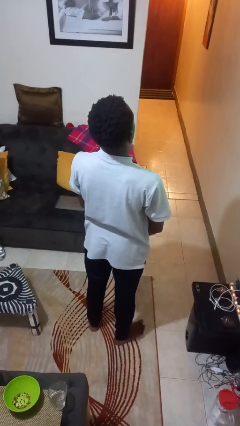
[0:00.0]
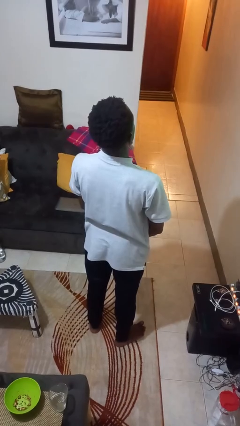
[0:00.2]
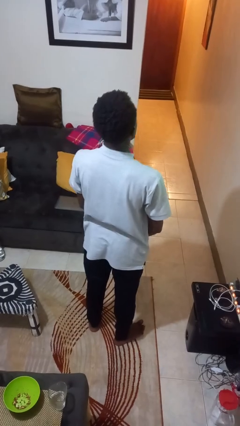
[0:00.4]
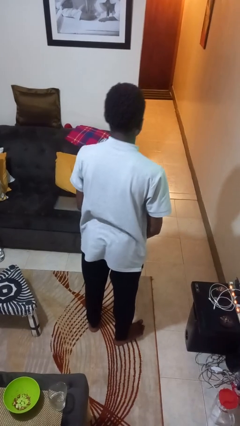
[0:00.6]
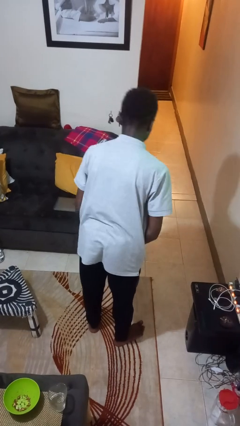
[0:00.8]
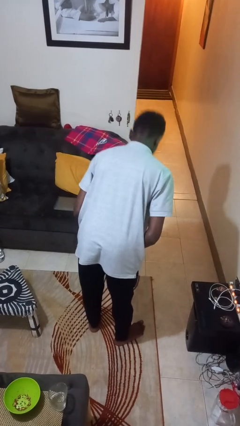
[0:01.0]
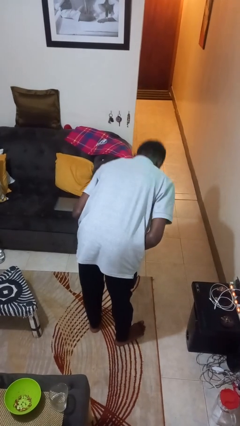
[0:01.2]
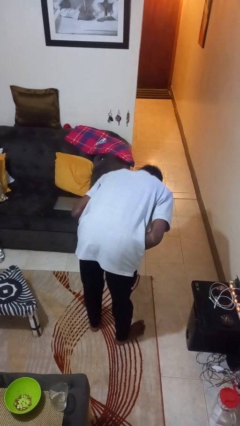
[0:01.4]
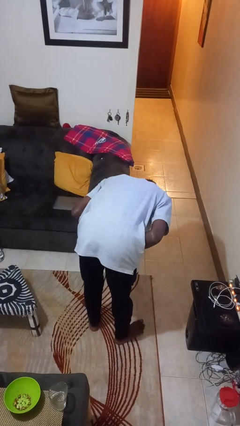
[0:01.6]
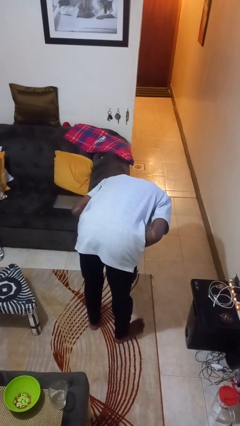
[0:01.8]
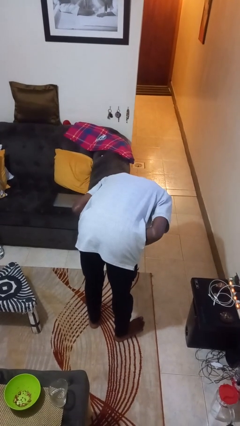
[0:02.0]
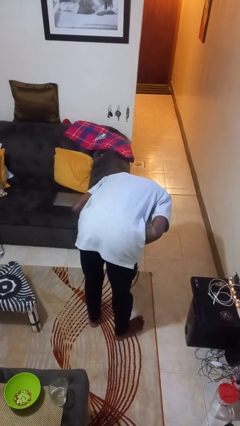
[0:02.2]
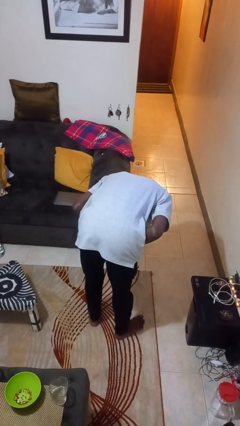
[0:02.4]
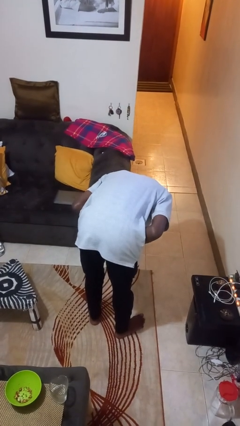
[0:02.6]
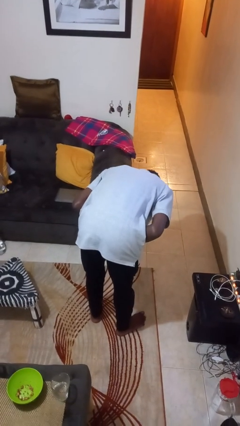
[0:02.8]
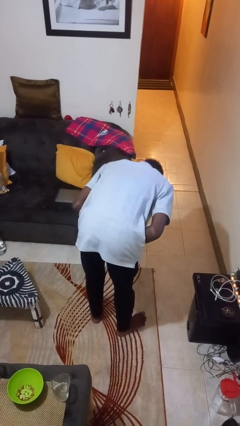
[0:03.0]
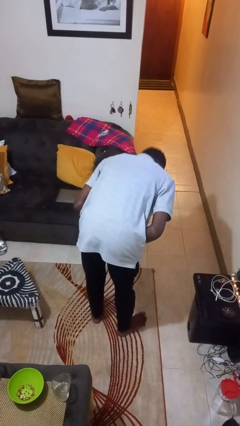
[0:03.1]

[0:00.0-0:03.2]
person bows

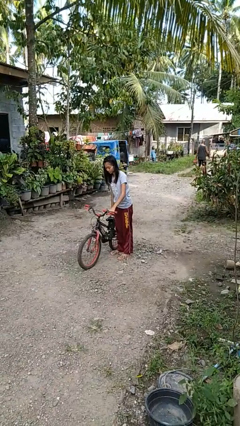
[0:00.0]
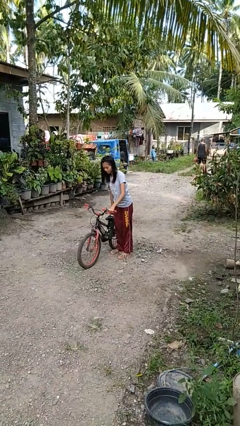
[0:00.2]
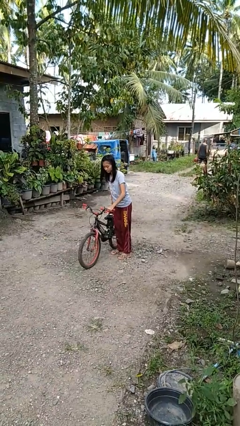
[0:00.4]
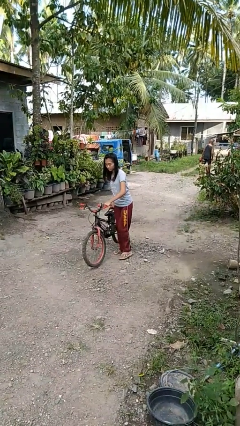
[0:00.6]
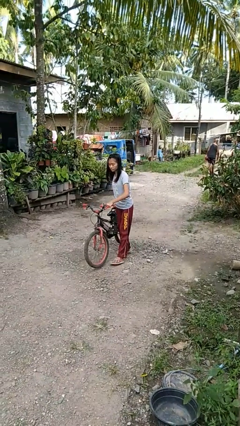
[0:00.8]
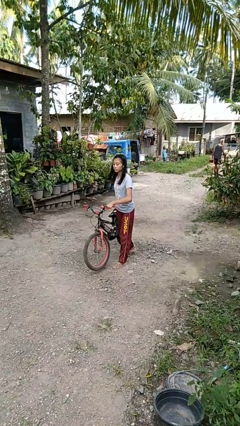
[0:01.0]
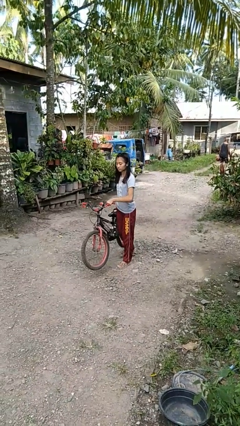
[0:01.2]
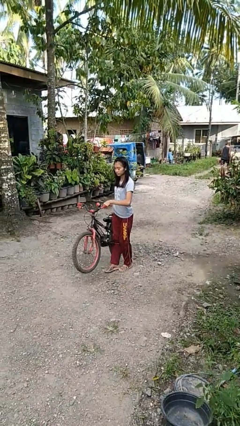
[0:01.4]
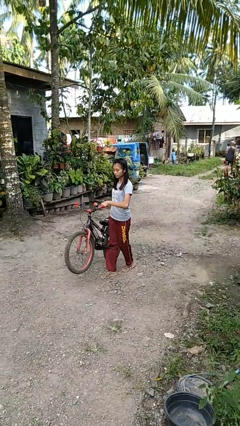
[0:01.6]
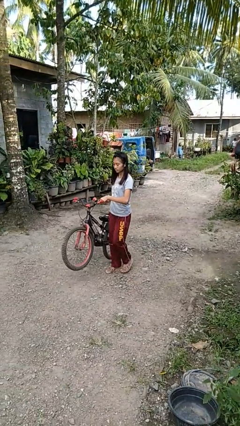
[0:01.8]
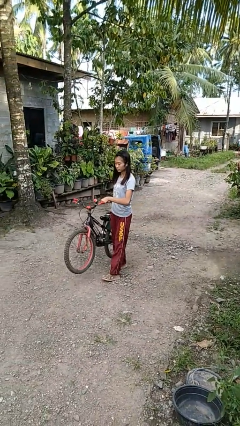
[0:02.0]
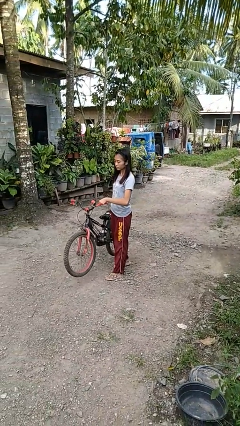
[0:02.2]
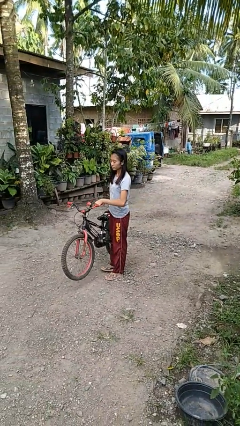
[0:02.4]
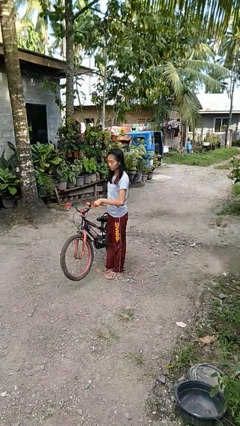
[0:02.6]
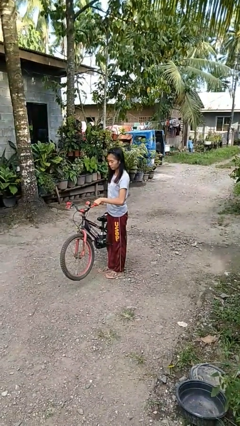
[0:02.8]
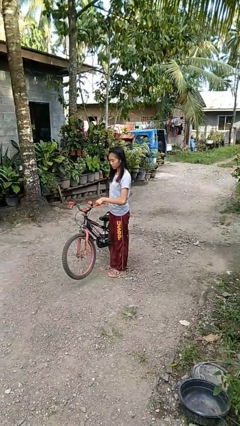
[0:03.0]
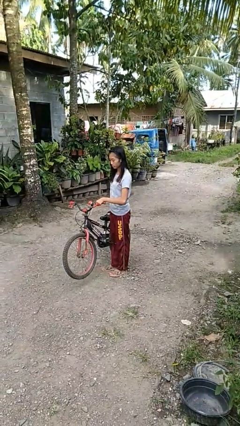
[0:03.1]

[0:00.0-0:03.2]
person carries bicycle

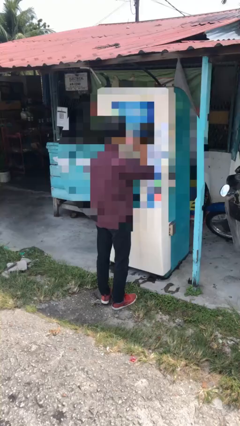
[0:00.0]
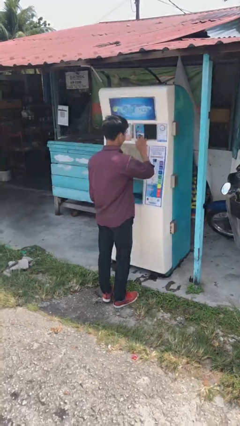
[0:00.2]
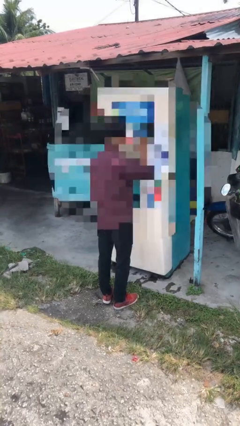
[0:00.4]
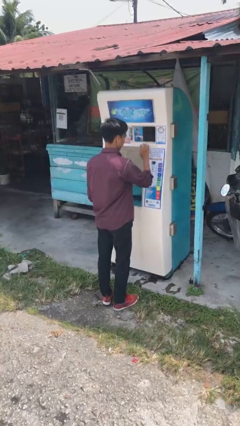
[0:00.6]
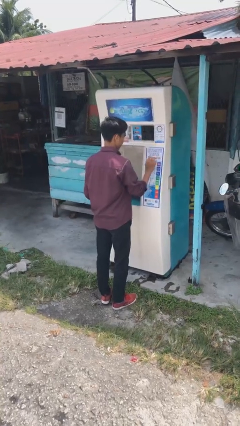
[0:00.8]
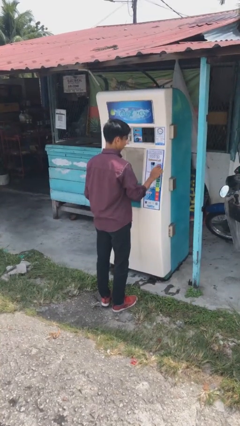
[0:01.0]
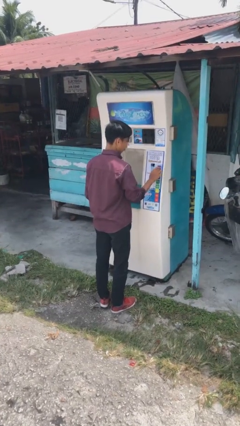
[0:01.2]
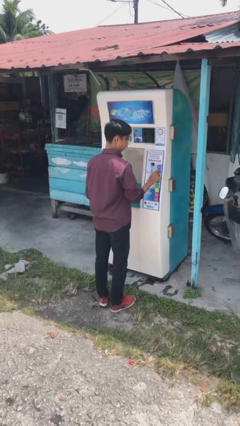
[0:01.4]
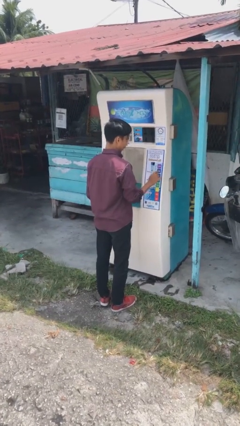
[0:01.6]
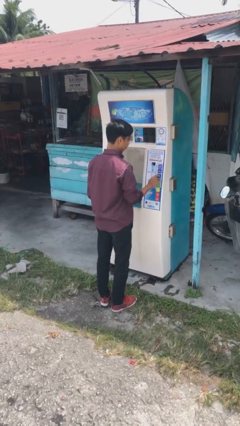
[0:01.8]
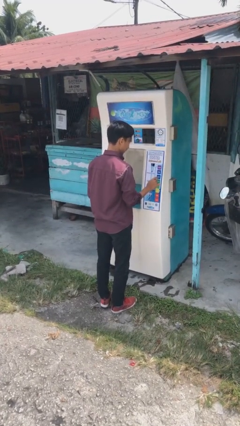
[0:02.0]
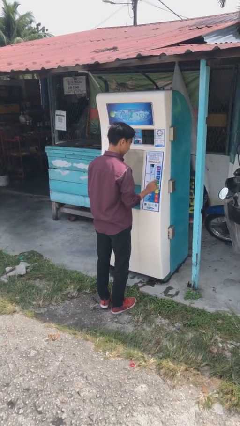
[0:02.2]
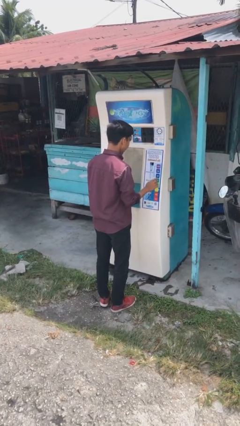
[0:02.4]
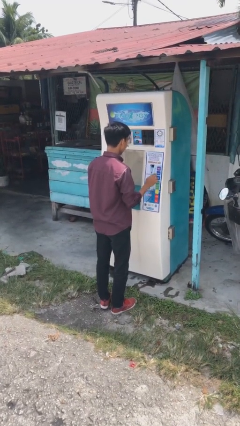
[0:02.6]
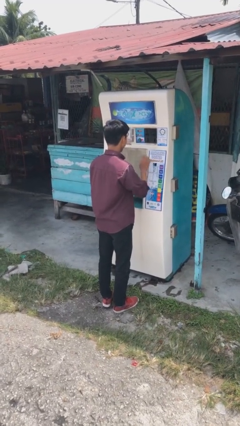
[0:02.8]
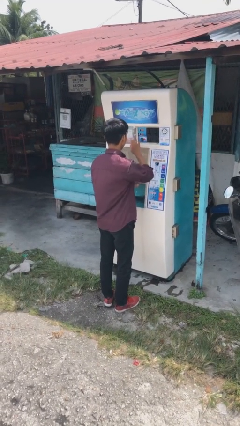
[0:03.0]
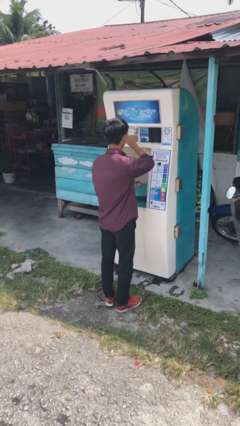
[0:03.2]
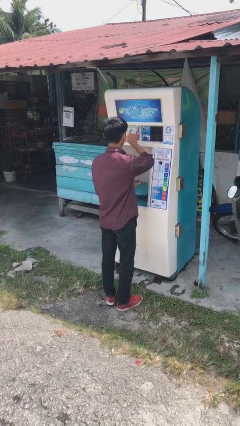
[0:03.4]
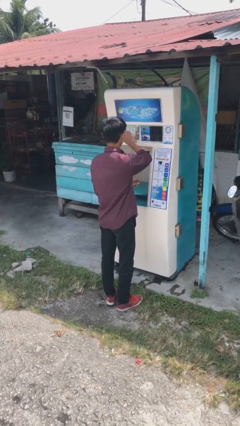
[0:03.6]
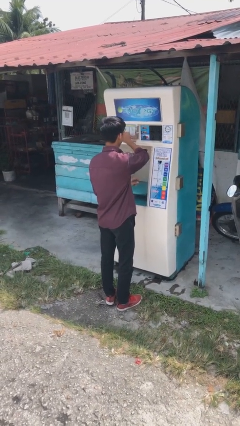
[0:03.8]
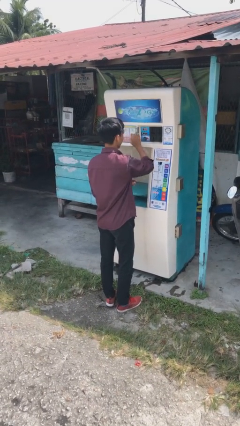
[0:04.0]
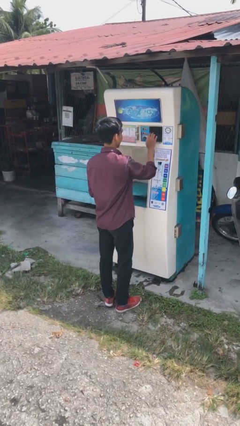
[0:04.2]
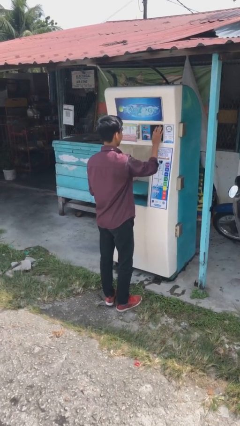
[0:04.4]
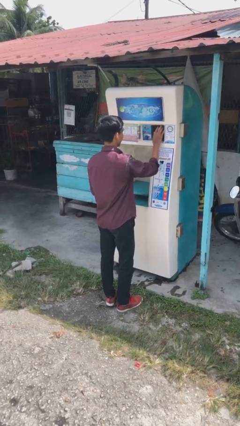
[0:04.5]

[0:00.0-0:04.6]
person purchases from machine

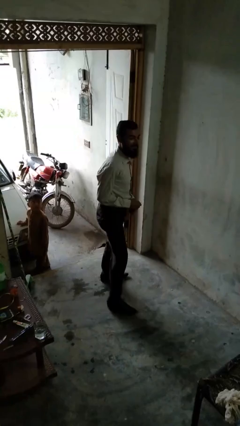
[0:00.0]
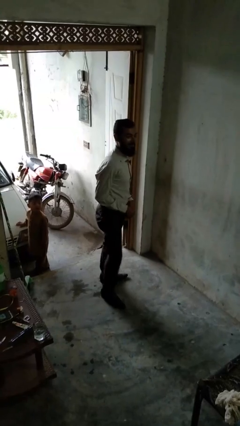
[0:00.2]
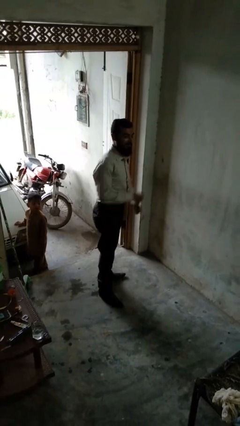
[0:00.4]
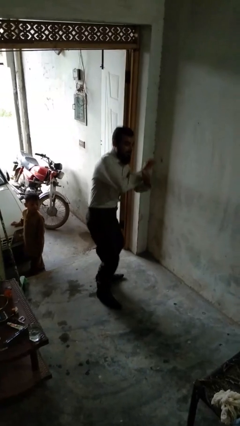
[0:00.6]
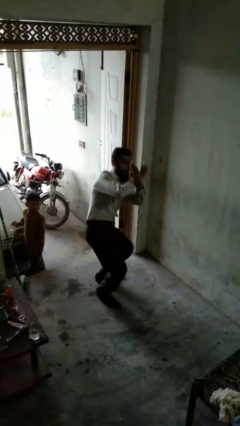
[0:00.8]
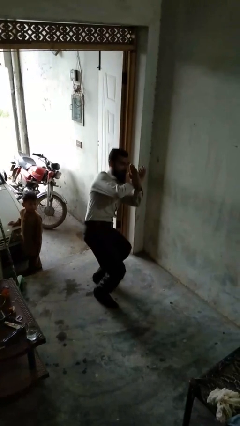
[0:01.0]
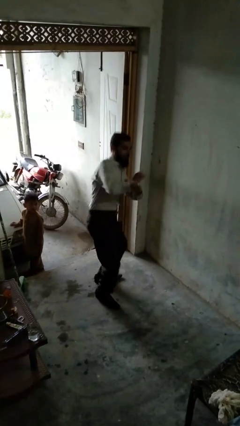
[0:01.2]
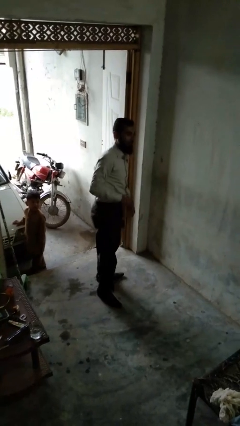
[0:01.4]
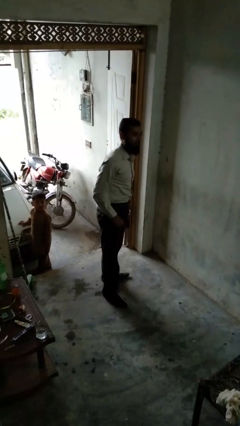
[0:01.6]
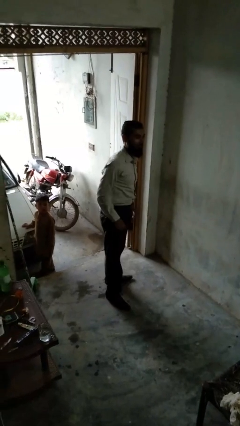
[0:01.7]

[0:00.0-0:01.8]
person karate chop

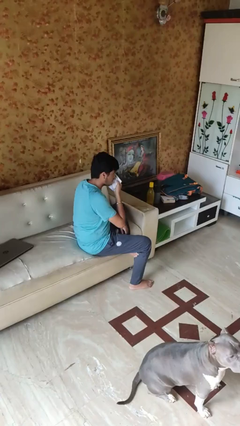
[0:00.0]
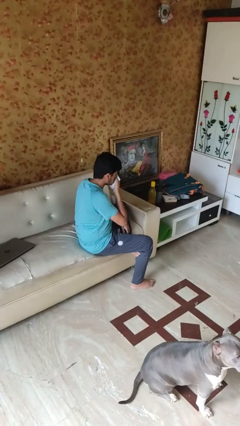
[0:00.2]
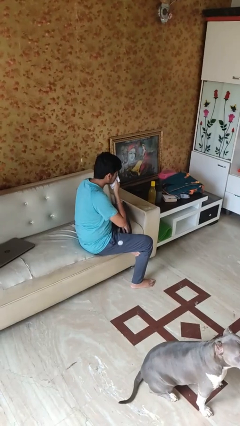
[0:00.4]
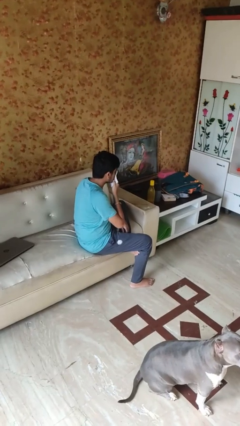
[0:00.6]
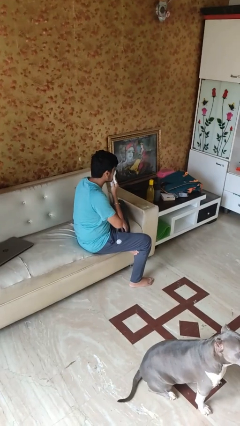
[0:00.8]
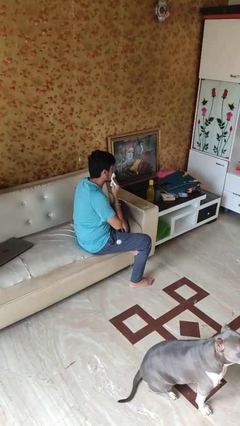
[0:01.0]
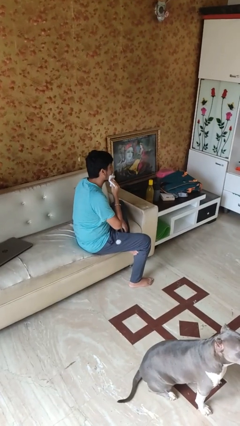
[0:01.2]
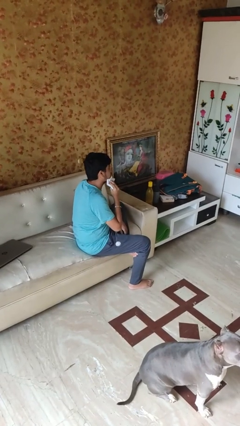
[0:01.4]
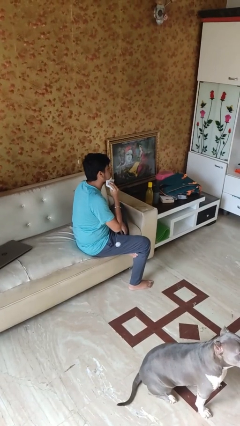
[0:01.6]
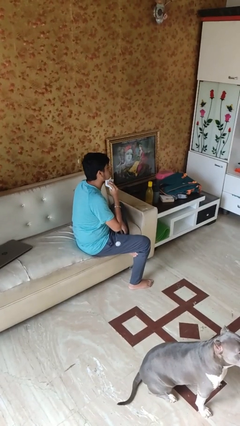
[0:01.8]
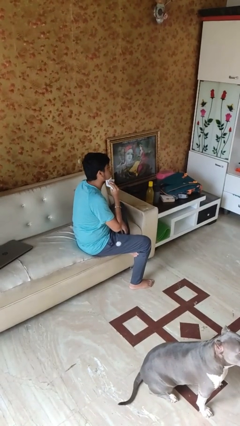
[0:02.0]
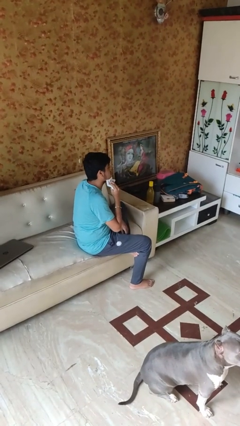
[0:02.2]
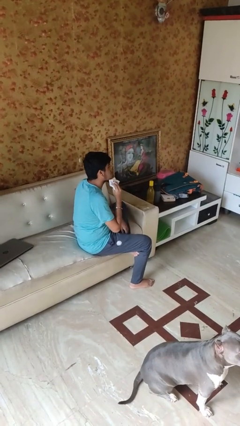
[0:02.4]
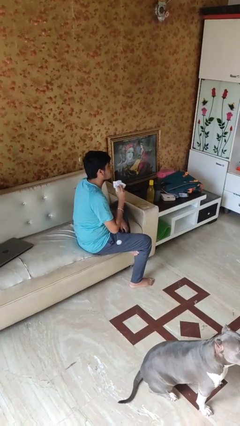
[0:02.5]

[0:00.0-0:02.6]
person wipes mouth with napkin

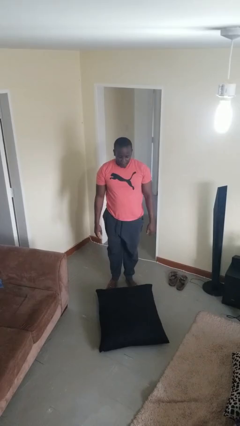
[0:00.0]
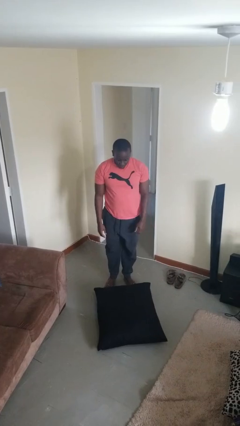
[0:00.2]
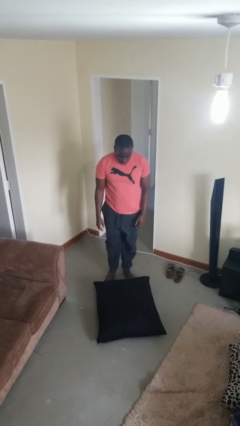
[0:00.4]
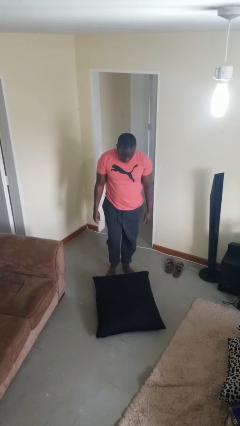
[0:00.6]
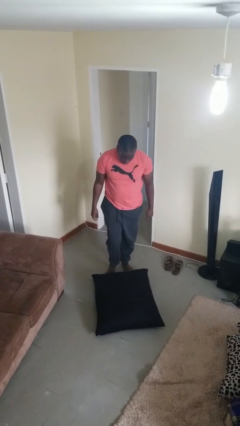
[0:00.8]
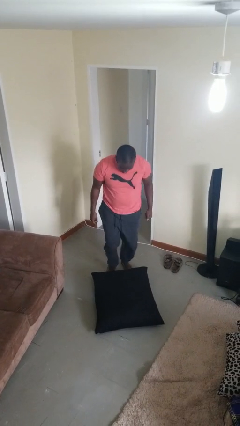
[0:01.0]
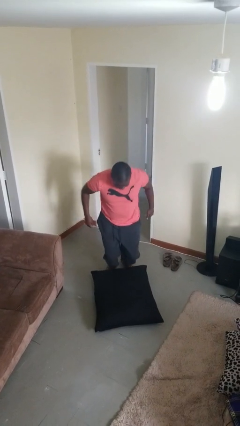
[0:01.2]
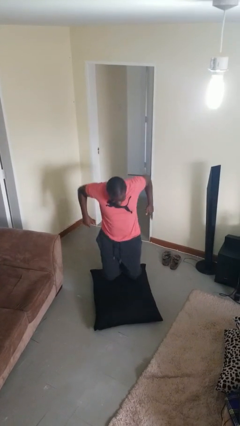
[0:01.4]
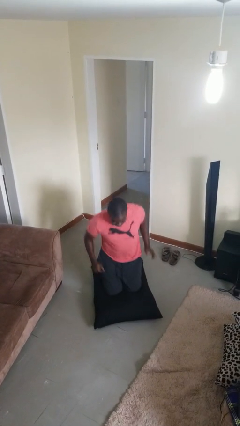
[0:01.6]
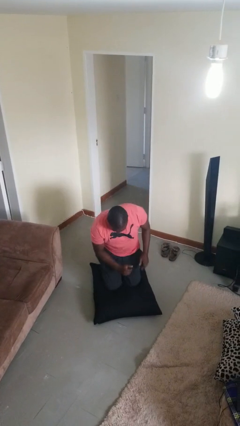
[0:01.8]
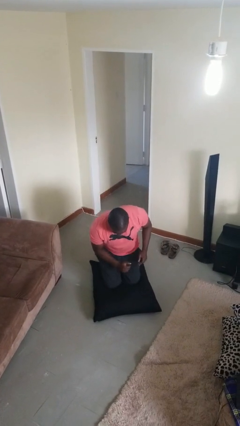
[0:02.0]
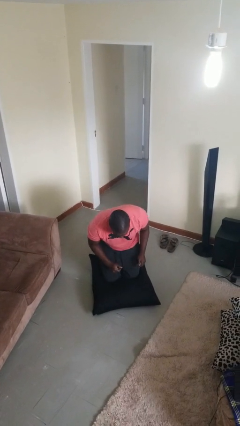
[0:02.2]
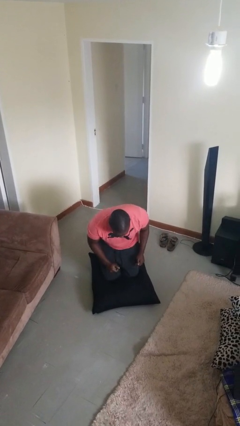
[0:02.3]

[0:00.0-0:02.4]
person trips on object on floor
